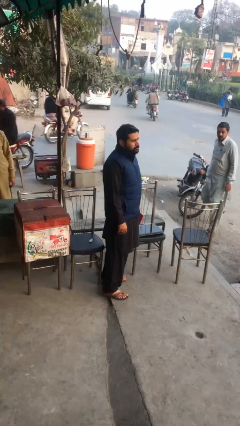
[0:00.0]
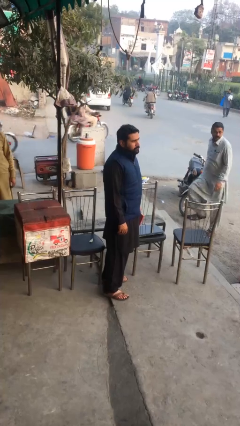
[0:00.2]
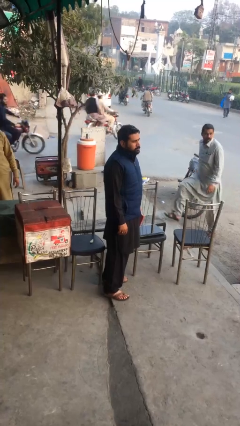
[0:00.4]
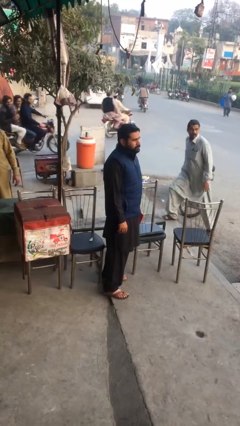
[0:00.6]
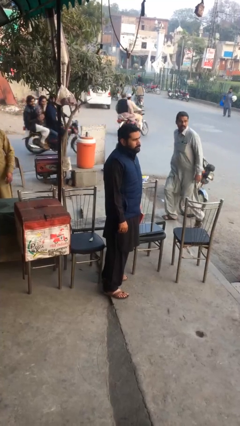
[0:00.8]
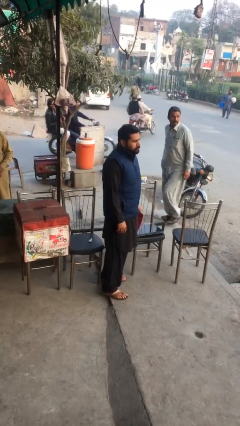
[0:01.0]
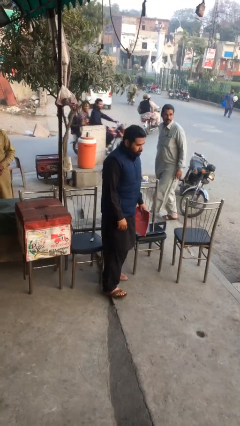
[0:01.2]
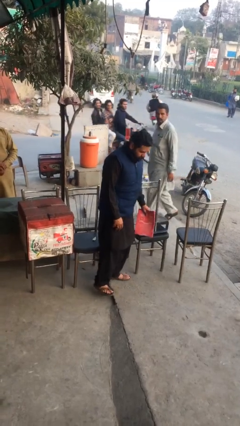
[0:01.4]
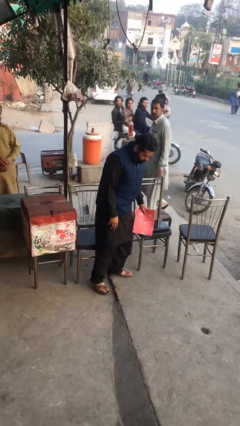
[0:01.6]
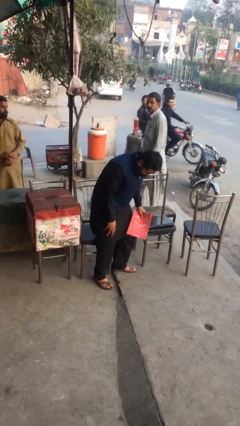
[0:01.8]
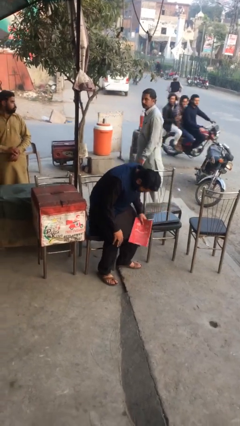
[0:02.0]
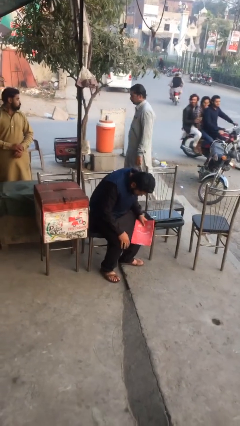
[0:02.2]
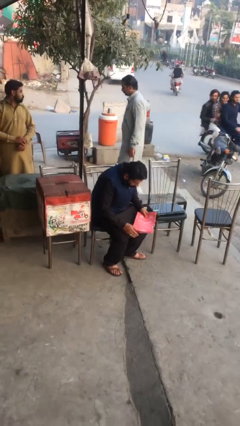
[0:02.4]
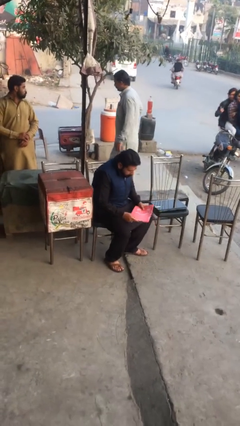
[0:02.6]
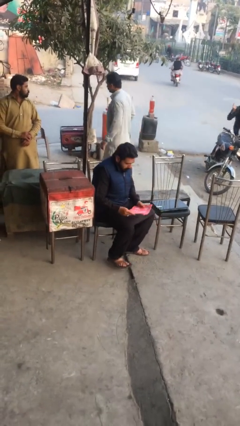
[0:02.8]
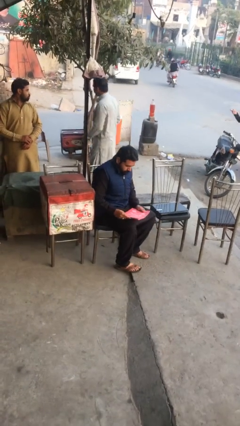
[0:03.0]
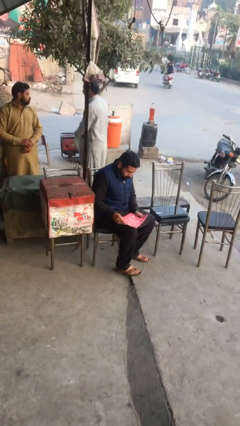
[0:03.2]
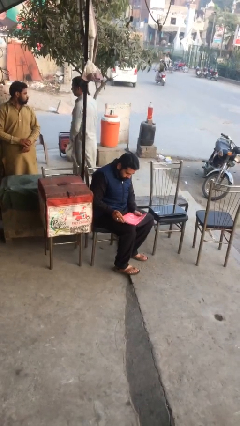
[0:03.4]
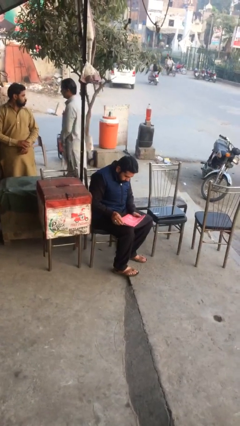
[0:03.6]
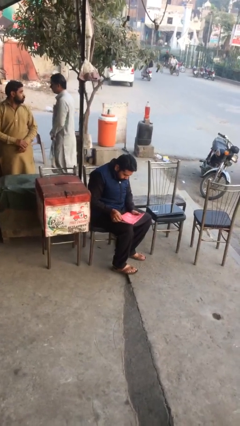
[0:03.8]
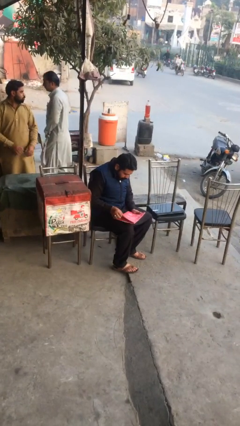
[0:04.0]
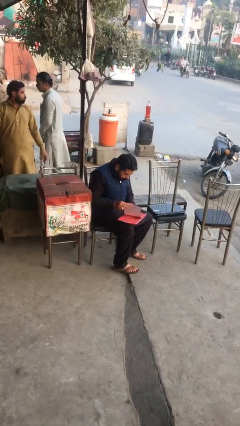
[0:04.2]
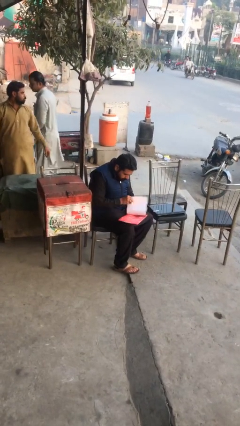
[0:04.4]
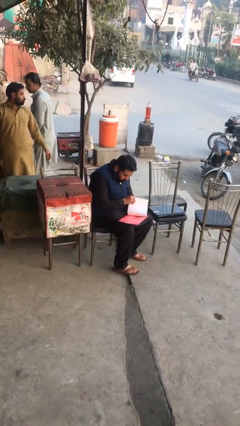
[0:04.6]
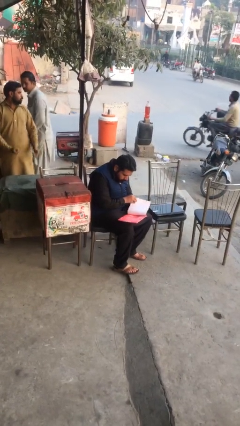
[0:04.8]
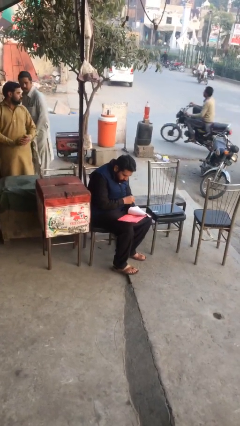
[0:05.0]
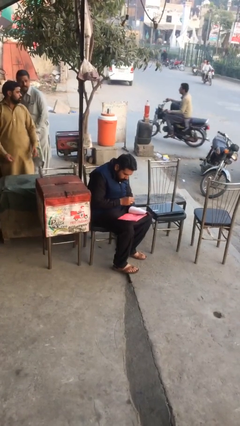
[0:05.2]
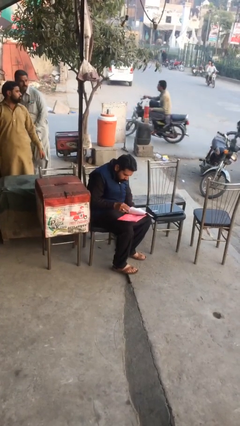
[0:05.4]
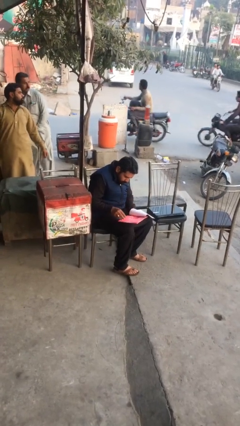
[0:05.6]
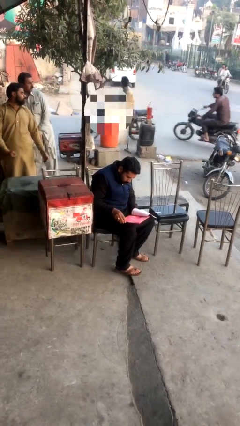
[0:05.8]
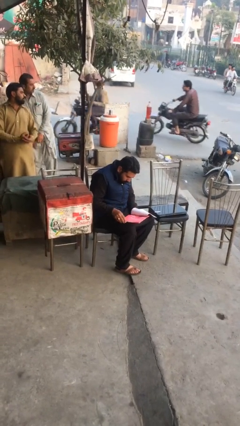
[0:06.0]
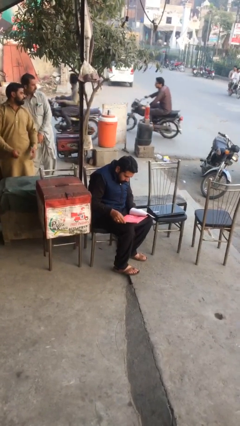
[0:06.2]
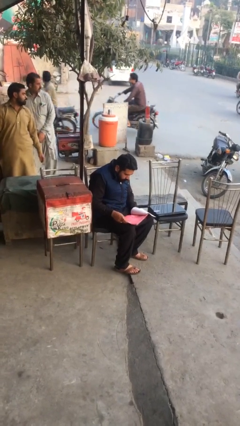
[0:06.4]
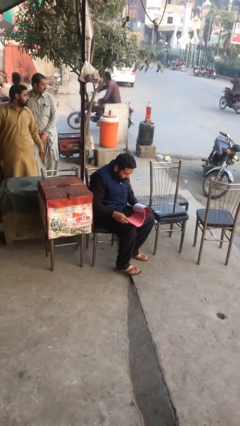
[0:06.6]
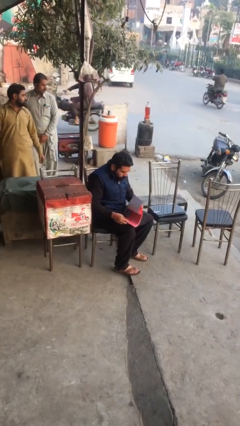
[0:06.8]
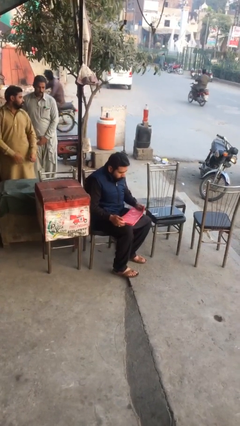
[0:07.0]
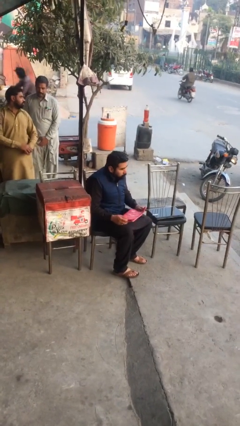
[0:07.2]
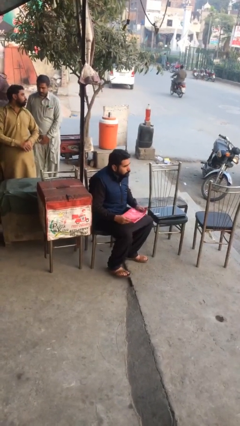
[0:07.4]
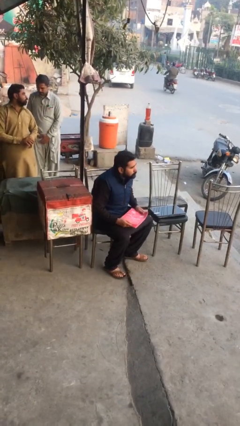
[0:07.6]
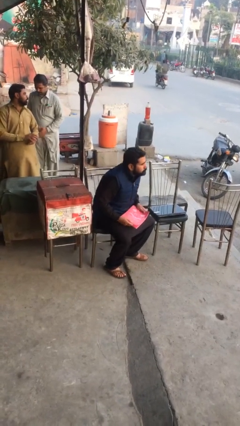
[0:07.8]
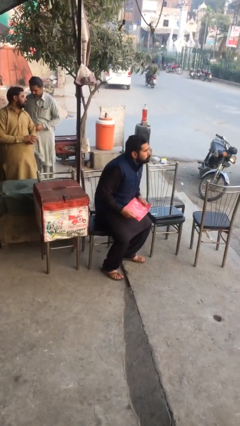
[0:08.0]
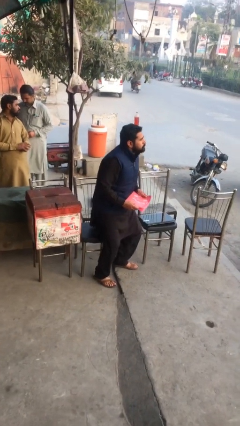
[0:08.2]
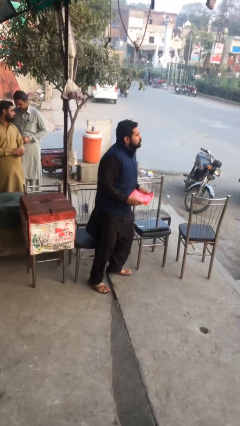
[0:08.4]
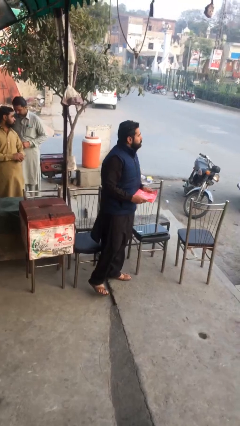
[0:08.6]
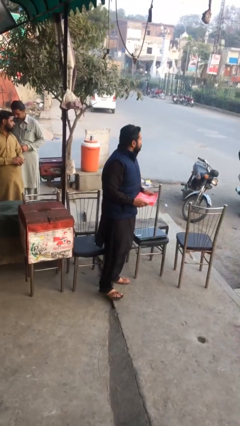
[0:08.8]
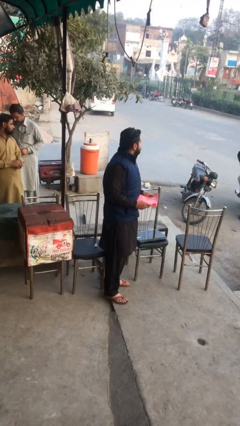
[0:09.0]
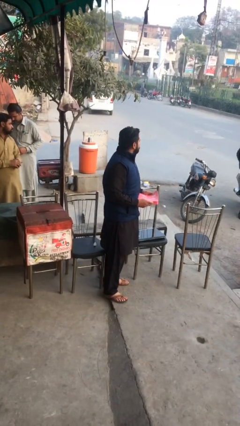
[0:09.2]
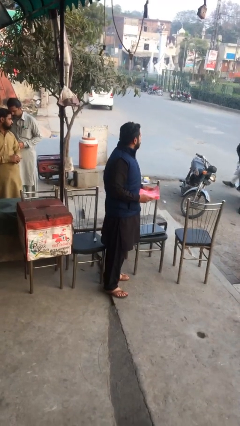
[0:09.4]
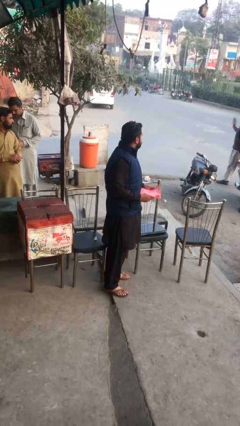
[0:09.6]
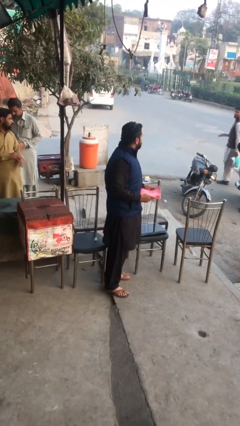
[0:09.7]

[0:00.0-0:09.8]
person reads document

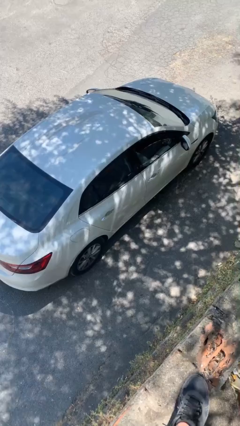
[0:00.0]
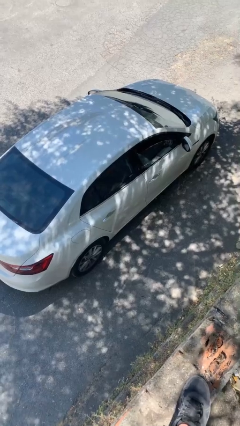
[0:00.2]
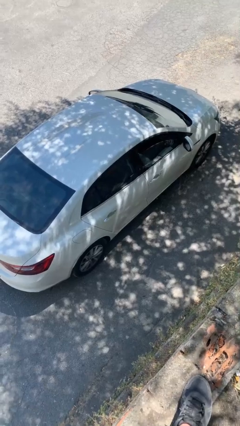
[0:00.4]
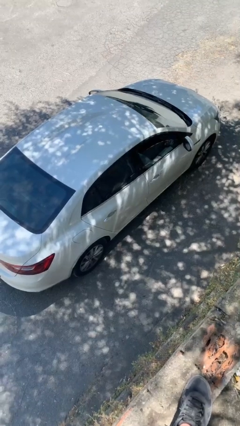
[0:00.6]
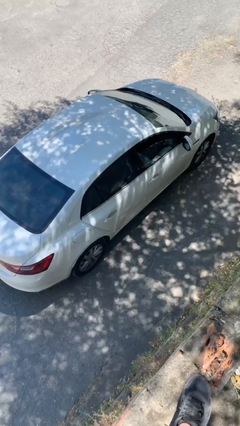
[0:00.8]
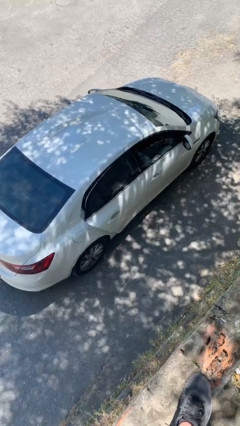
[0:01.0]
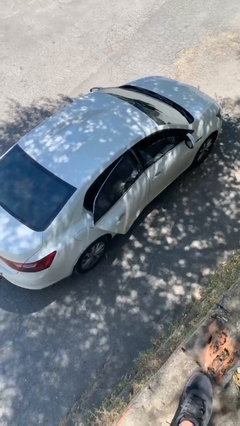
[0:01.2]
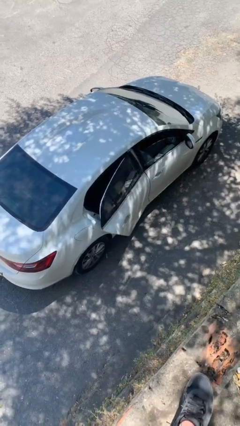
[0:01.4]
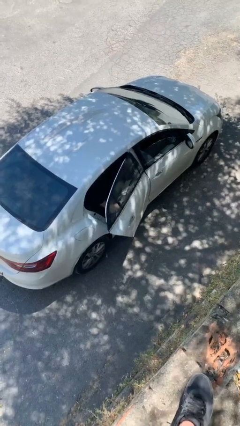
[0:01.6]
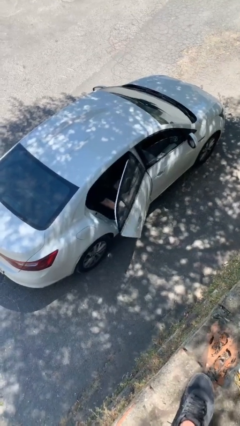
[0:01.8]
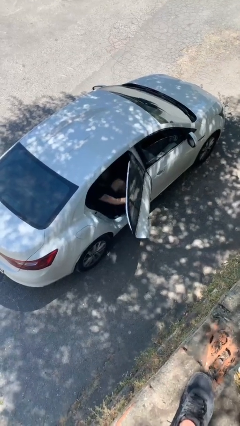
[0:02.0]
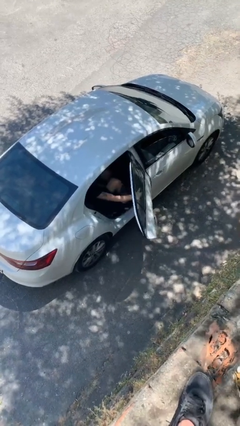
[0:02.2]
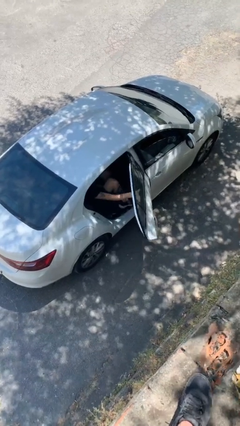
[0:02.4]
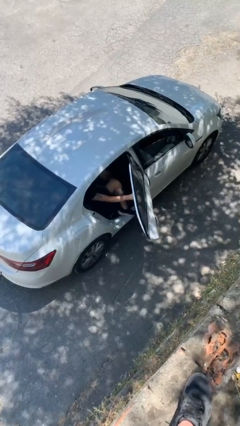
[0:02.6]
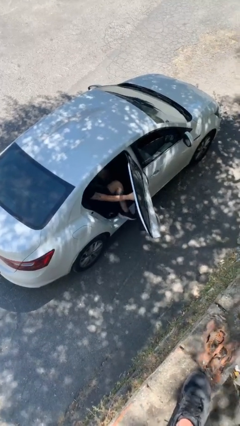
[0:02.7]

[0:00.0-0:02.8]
person opens car door

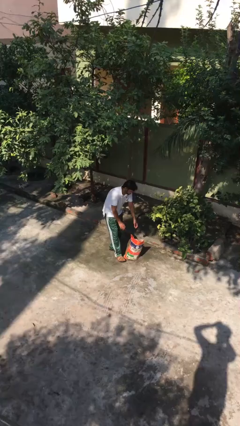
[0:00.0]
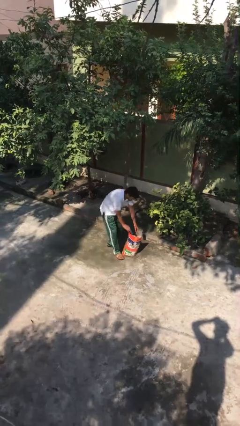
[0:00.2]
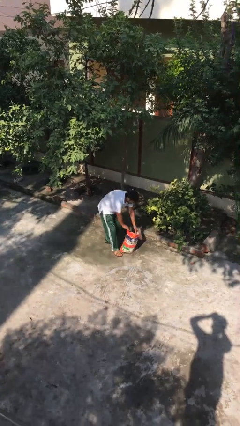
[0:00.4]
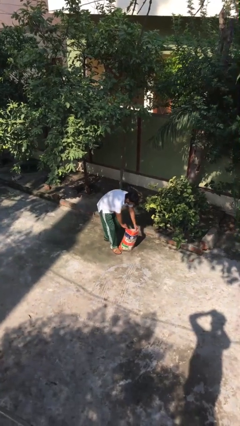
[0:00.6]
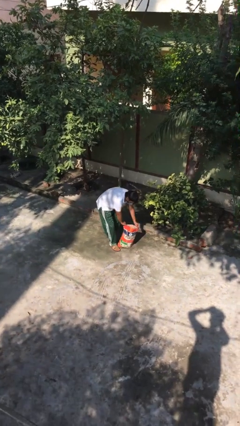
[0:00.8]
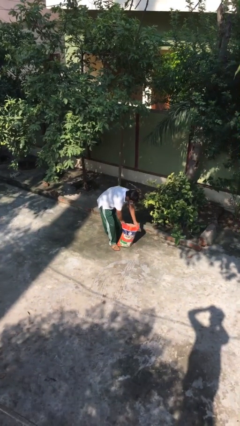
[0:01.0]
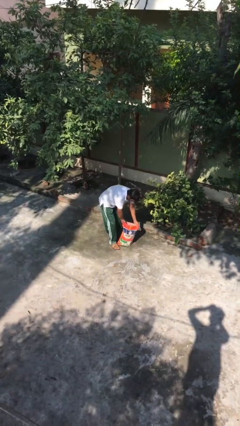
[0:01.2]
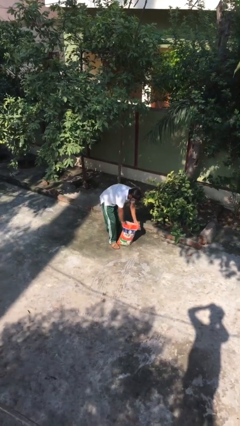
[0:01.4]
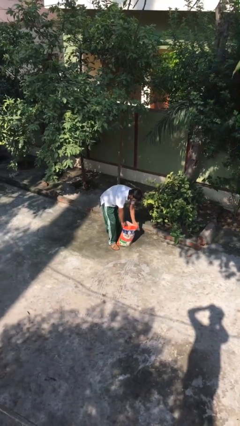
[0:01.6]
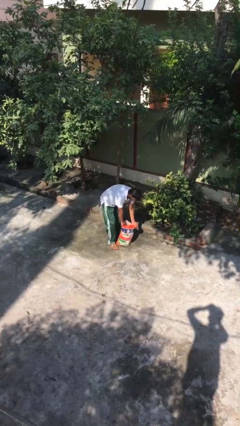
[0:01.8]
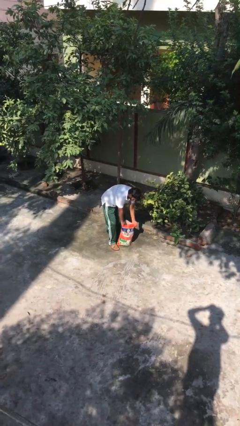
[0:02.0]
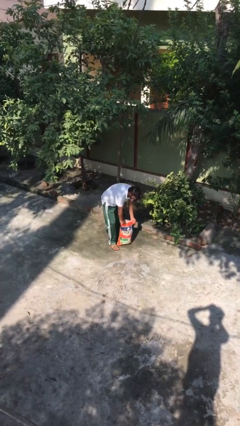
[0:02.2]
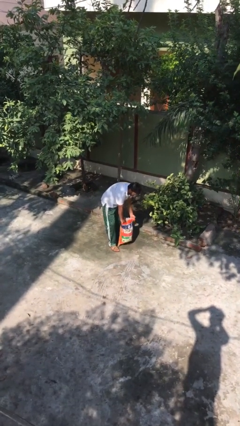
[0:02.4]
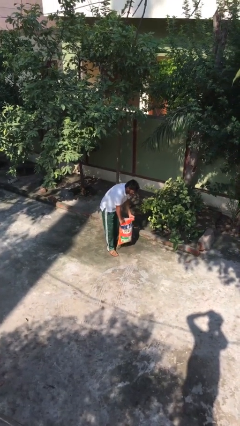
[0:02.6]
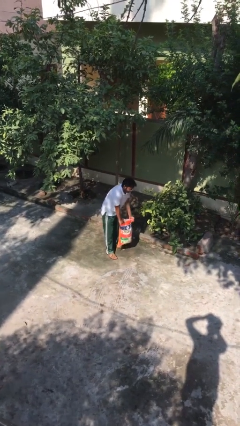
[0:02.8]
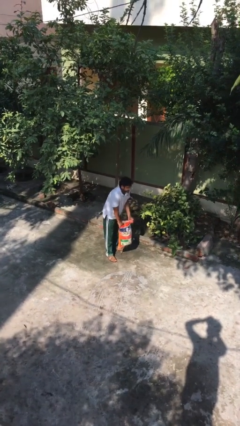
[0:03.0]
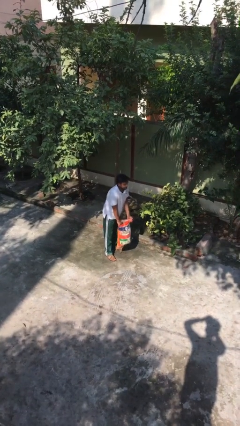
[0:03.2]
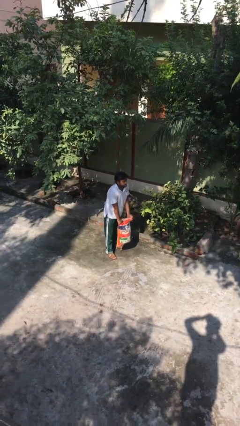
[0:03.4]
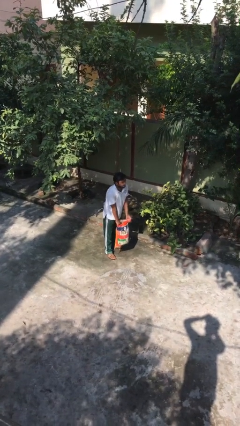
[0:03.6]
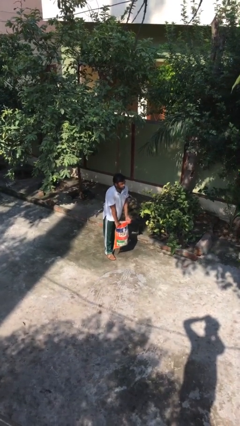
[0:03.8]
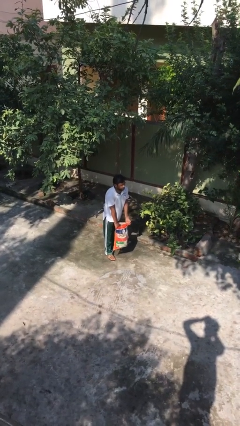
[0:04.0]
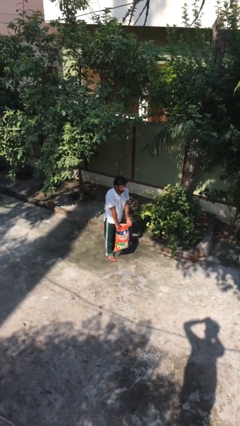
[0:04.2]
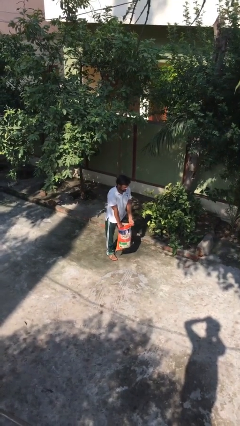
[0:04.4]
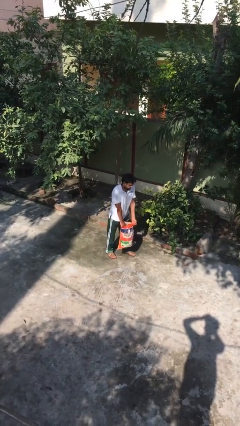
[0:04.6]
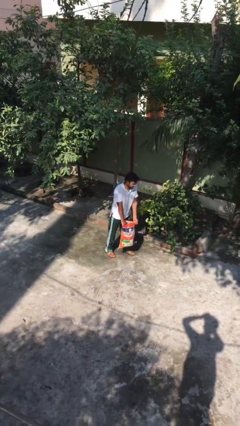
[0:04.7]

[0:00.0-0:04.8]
person picks up object from floor

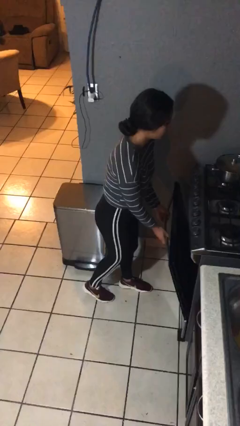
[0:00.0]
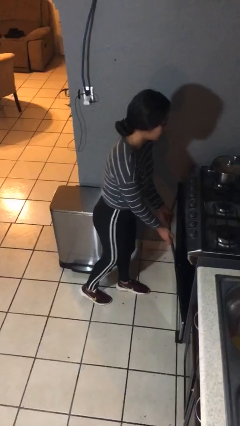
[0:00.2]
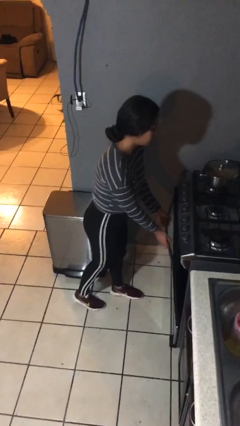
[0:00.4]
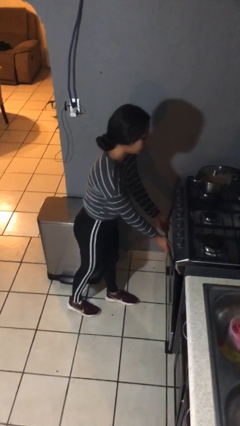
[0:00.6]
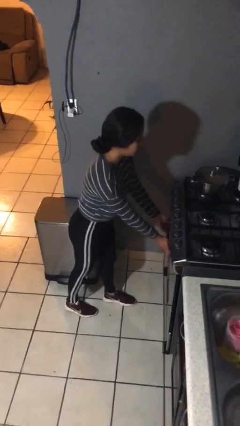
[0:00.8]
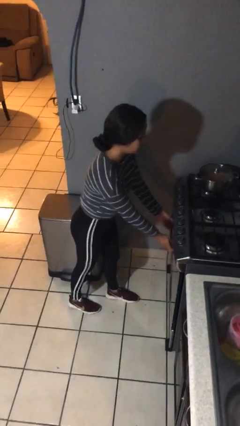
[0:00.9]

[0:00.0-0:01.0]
person closes oven door
